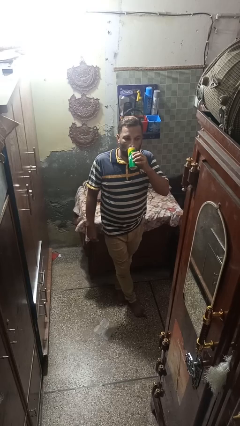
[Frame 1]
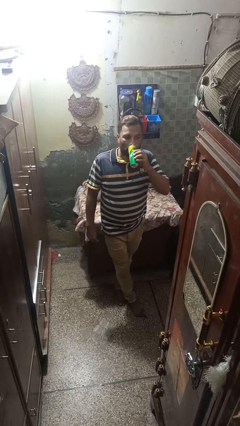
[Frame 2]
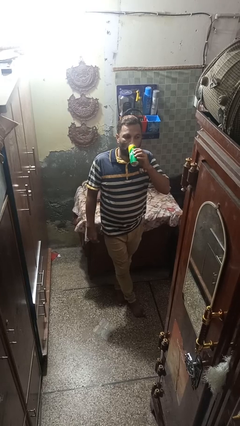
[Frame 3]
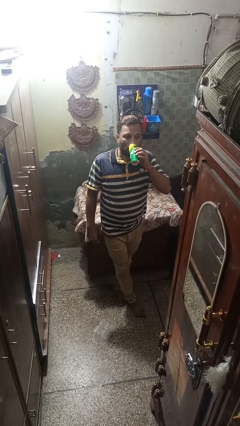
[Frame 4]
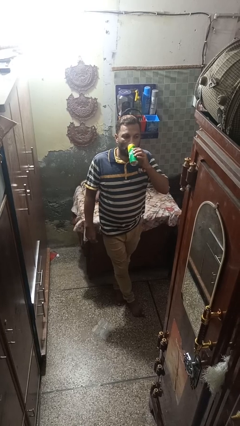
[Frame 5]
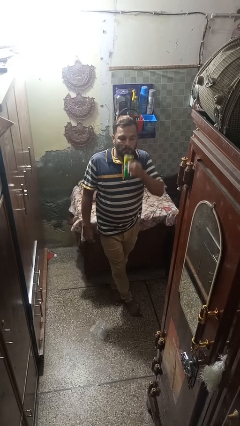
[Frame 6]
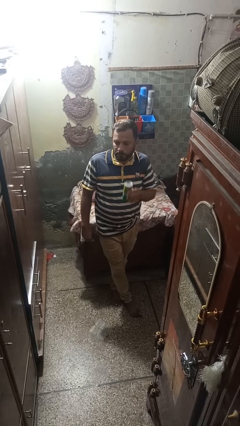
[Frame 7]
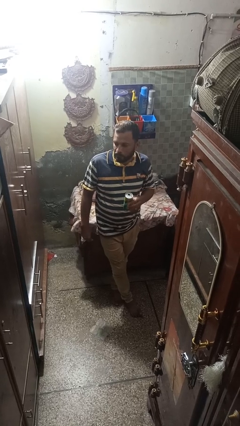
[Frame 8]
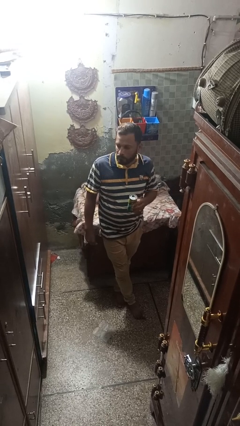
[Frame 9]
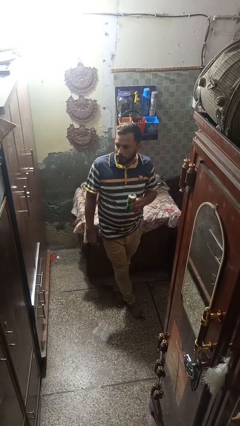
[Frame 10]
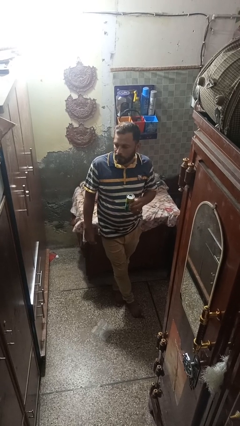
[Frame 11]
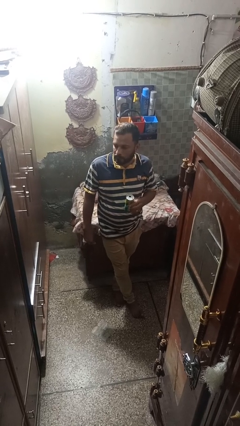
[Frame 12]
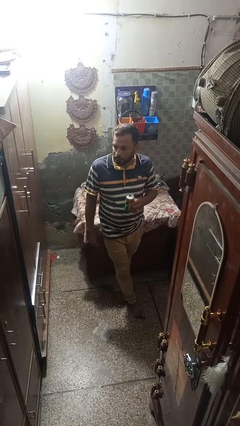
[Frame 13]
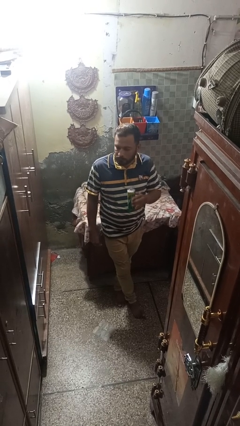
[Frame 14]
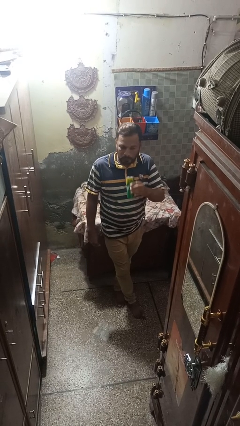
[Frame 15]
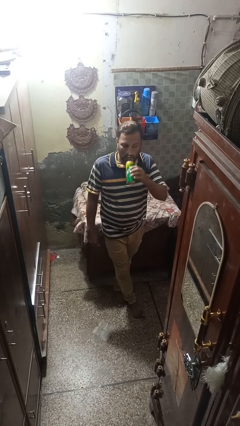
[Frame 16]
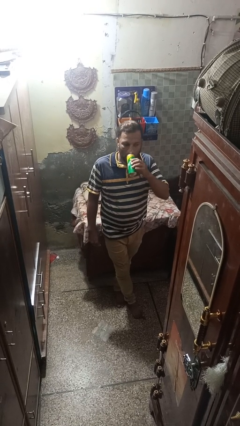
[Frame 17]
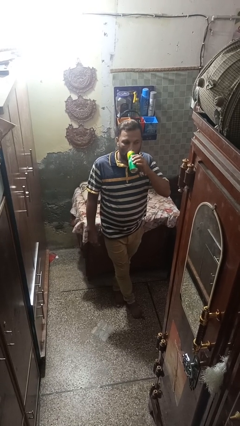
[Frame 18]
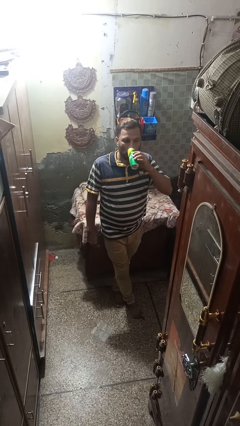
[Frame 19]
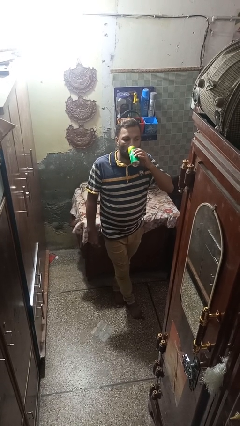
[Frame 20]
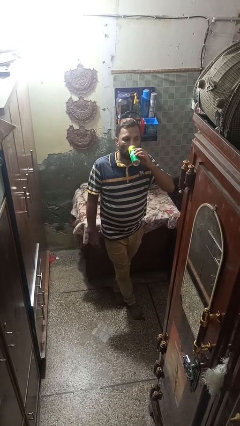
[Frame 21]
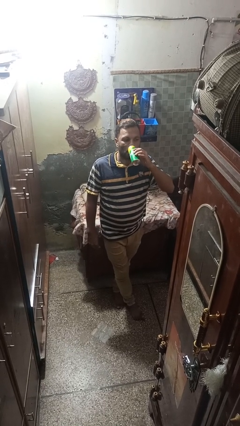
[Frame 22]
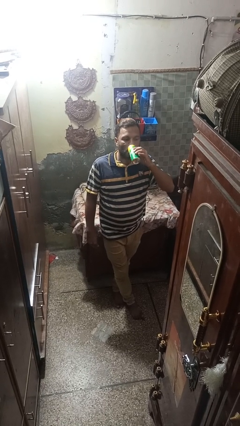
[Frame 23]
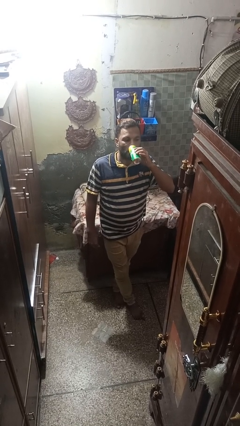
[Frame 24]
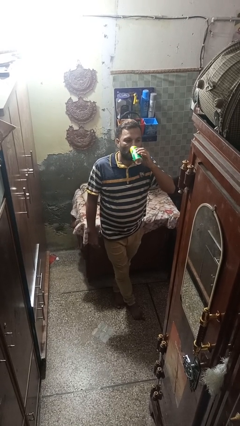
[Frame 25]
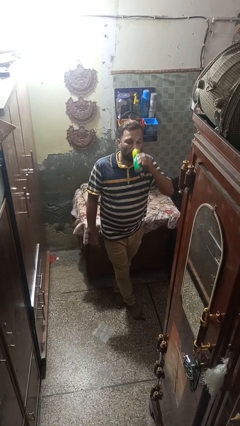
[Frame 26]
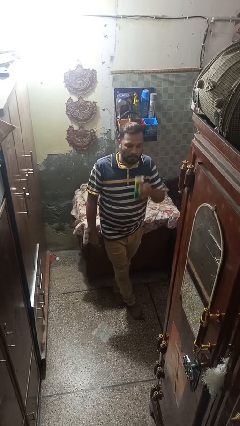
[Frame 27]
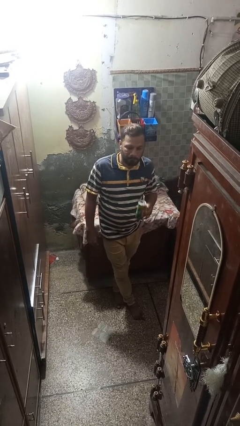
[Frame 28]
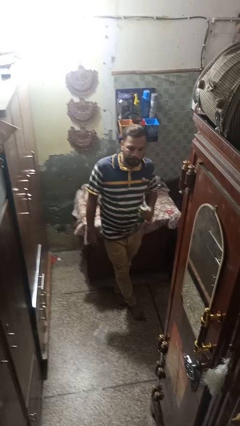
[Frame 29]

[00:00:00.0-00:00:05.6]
person drinks from beverage can

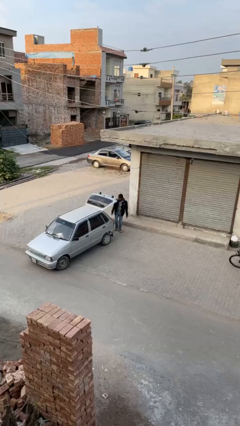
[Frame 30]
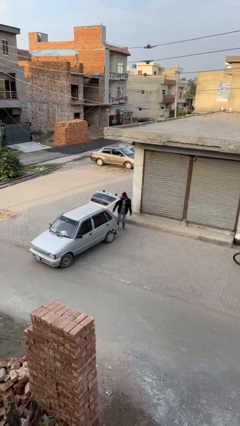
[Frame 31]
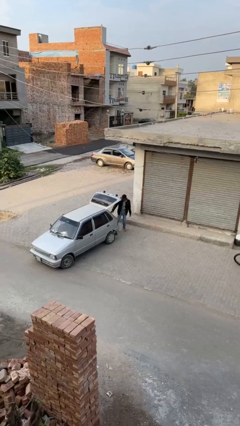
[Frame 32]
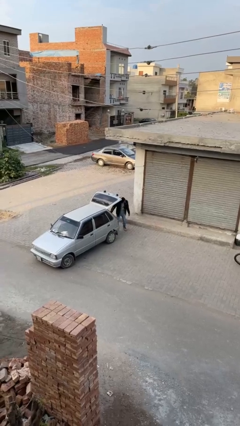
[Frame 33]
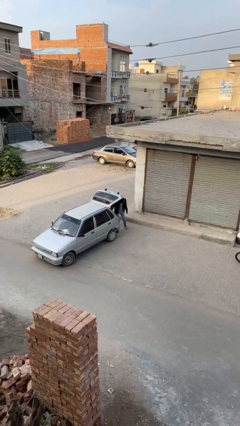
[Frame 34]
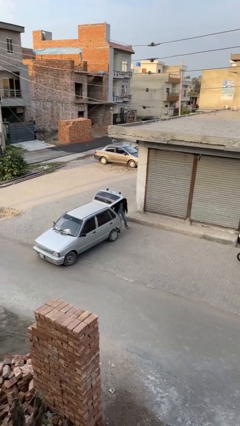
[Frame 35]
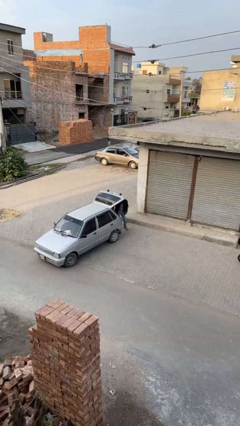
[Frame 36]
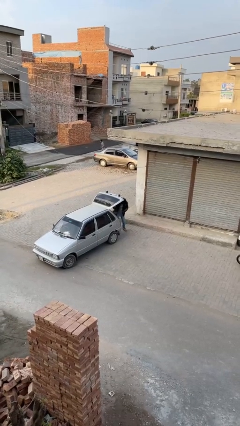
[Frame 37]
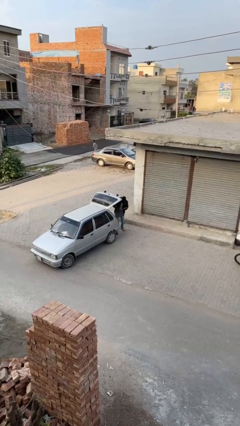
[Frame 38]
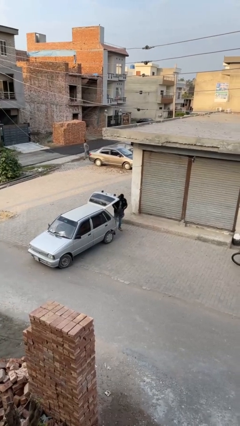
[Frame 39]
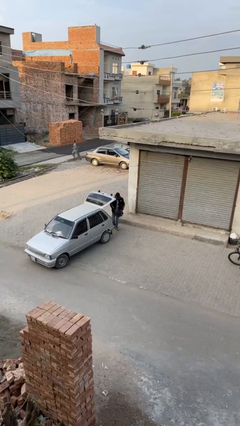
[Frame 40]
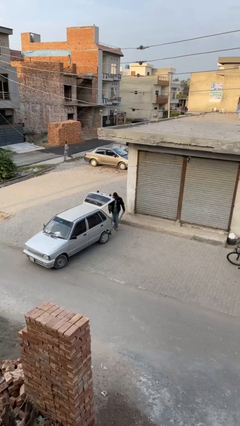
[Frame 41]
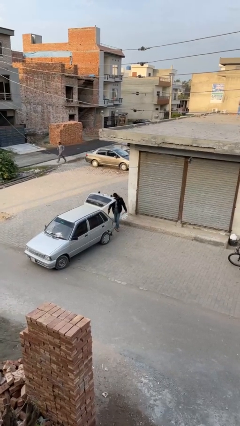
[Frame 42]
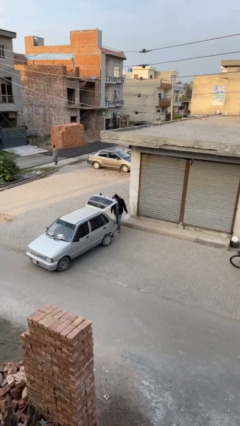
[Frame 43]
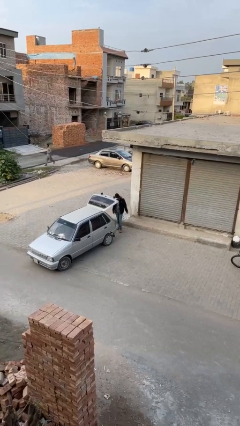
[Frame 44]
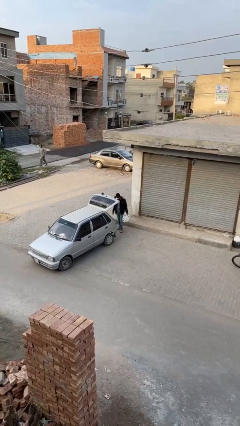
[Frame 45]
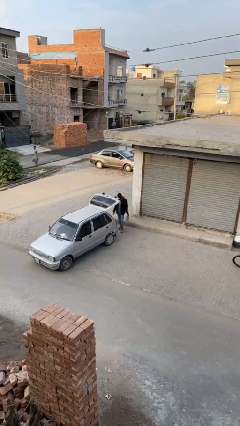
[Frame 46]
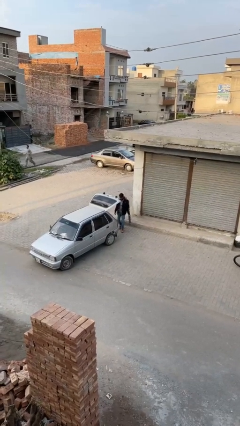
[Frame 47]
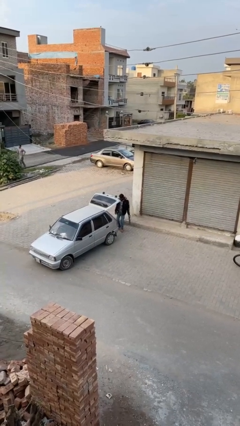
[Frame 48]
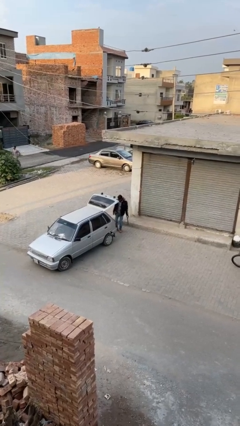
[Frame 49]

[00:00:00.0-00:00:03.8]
person unloads car

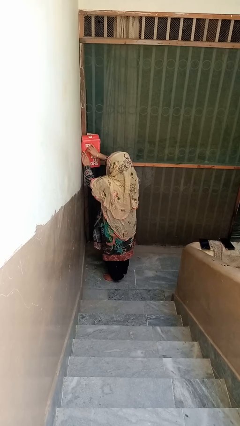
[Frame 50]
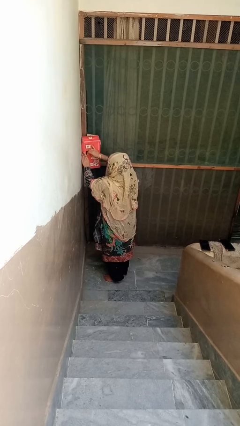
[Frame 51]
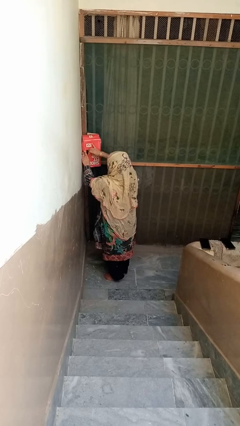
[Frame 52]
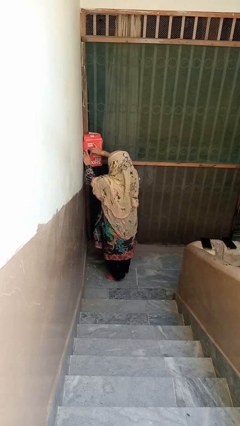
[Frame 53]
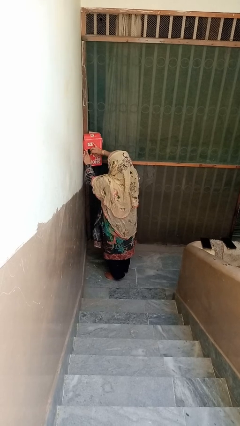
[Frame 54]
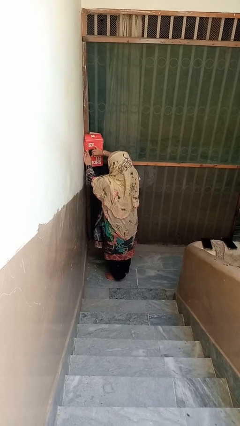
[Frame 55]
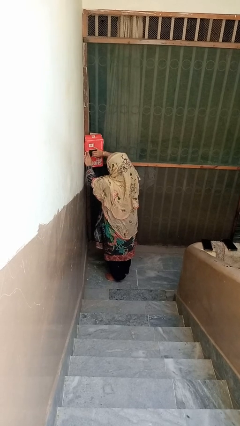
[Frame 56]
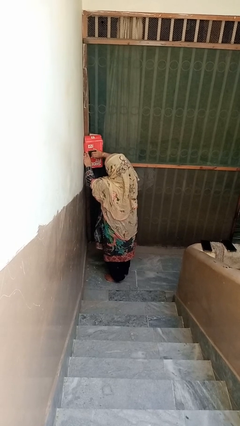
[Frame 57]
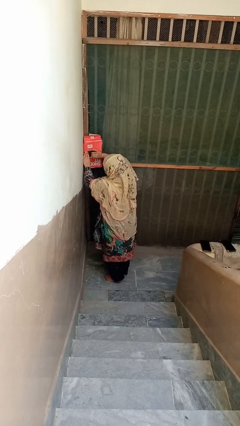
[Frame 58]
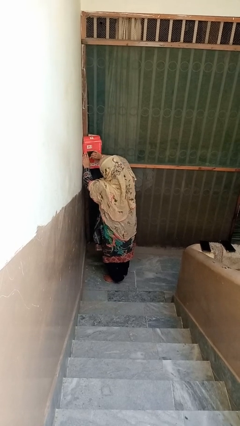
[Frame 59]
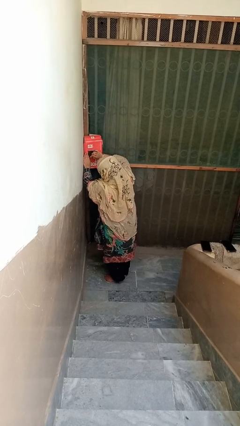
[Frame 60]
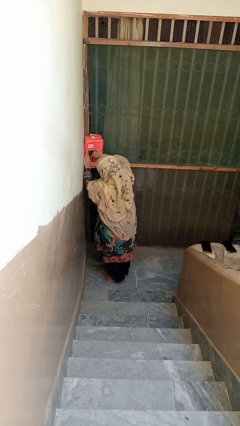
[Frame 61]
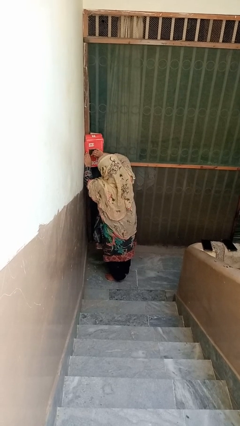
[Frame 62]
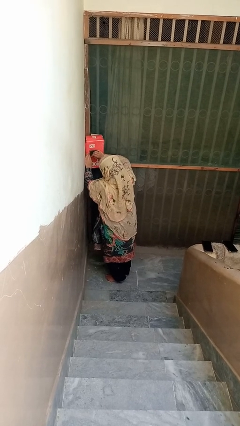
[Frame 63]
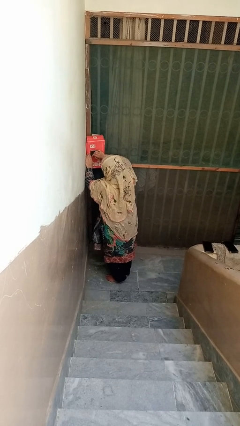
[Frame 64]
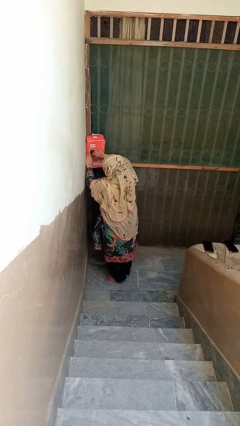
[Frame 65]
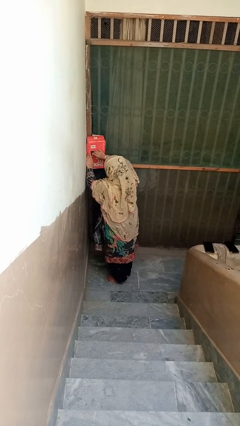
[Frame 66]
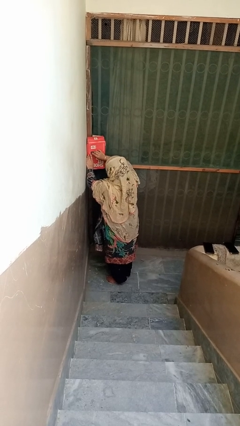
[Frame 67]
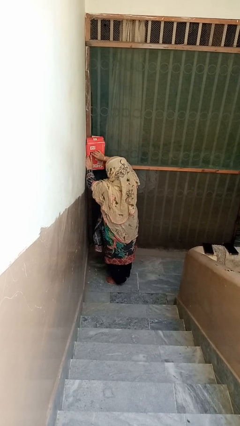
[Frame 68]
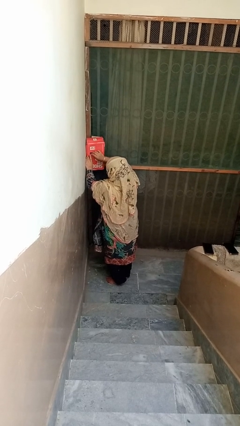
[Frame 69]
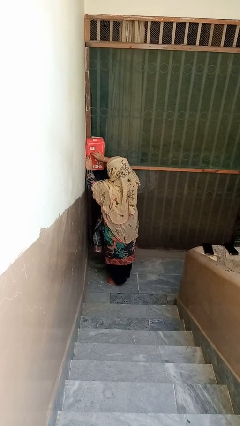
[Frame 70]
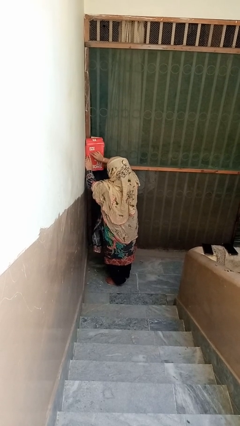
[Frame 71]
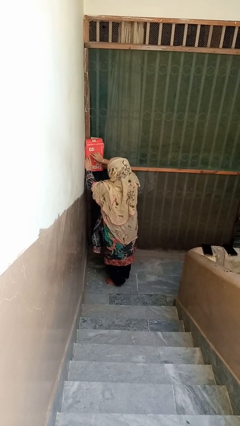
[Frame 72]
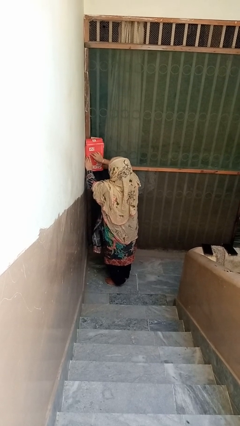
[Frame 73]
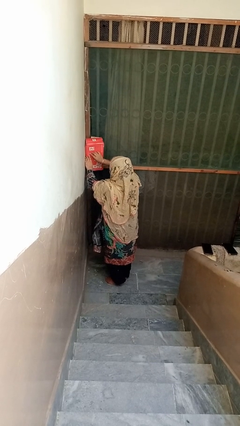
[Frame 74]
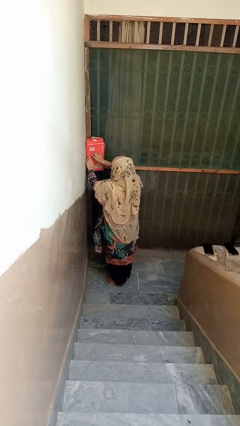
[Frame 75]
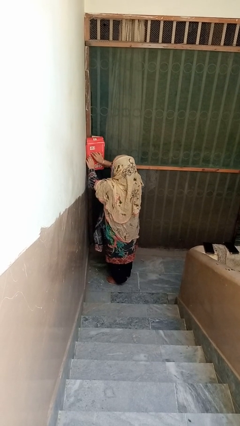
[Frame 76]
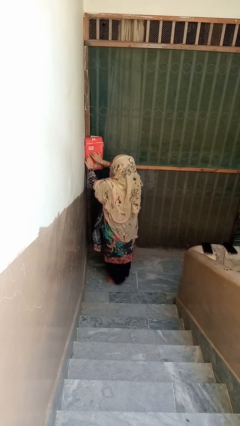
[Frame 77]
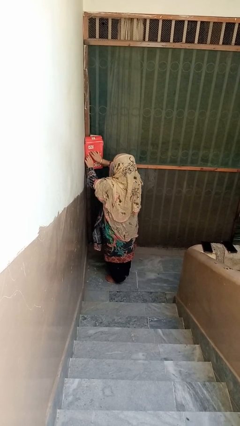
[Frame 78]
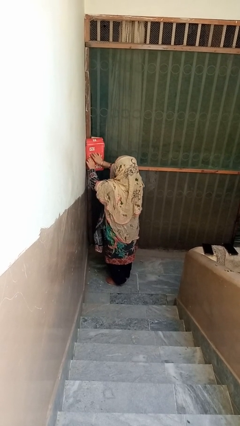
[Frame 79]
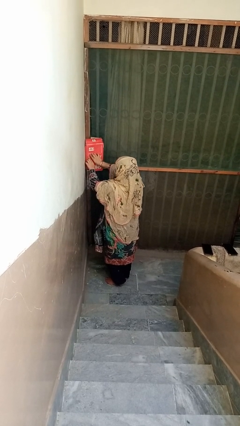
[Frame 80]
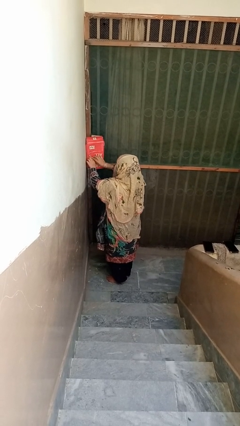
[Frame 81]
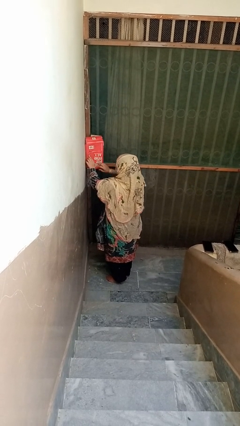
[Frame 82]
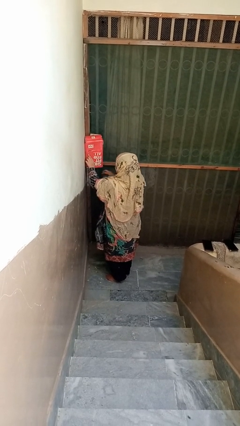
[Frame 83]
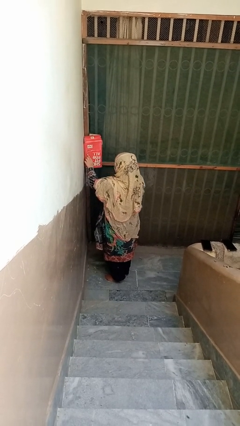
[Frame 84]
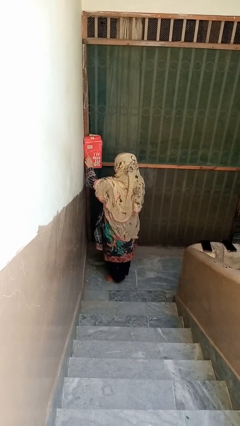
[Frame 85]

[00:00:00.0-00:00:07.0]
person opens mailbox

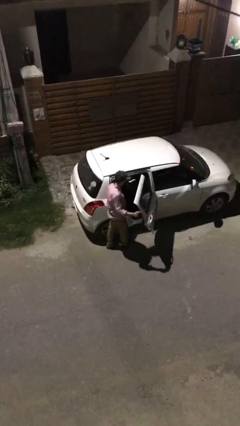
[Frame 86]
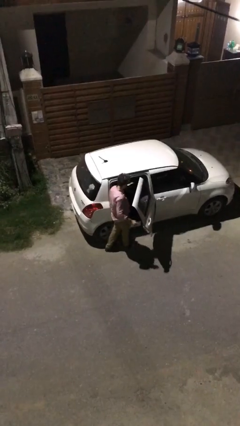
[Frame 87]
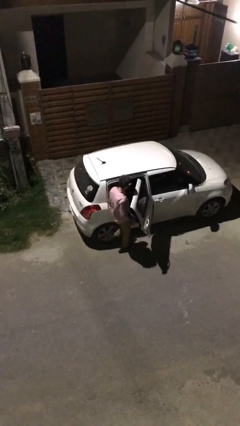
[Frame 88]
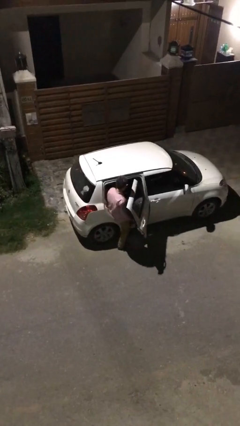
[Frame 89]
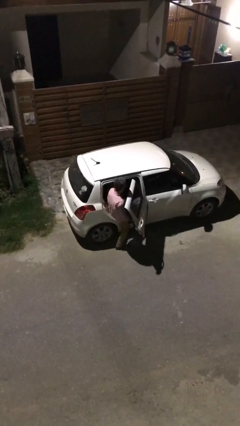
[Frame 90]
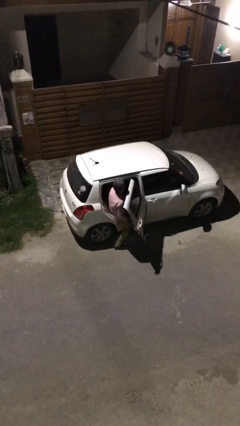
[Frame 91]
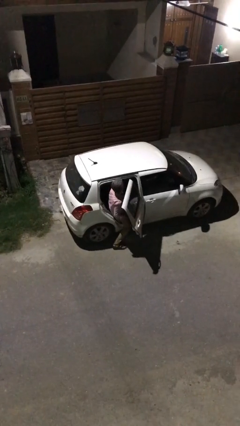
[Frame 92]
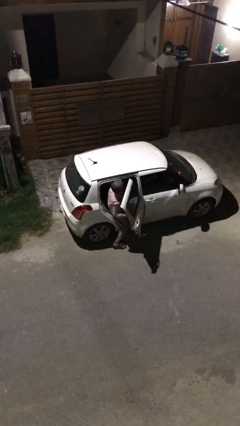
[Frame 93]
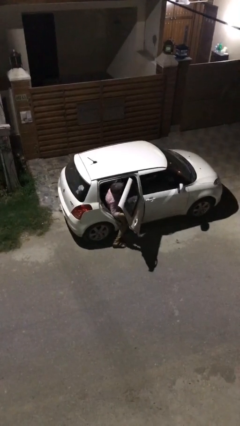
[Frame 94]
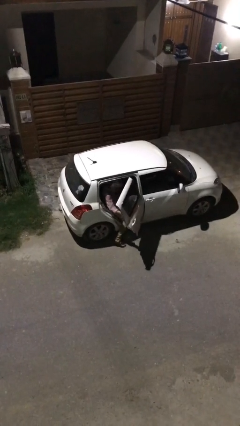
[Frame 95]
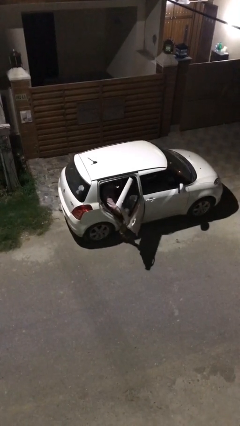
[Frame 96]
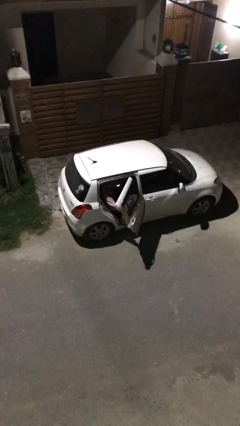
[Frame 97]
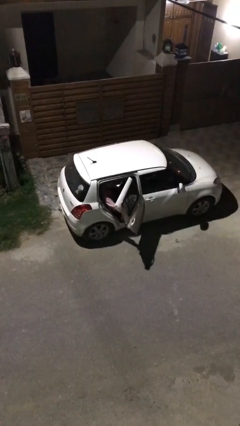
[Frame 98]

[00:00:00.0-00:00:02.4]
person enters car
